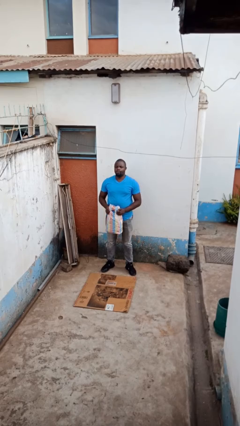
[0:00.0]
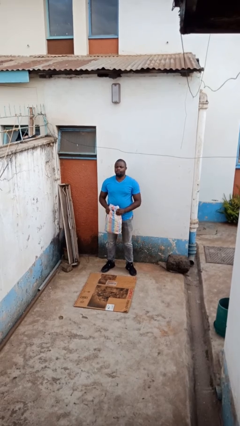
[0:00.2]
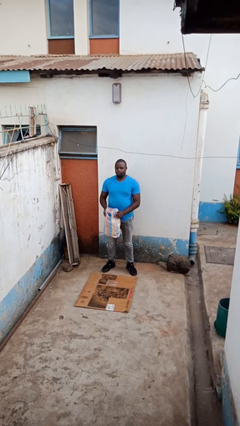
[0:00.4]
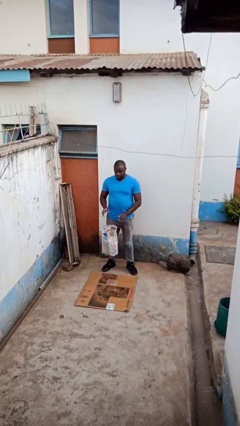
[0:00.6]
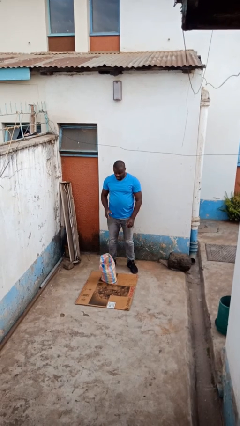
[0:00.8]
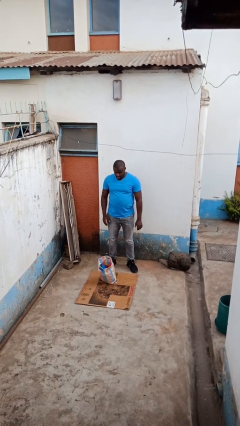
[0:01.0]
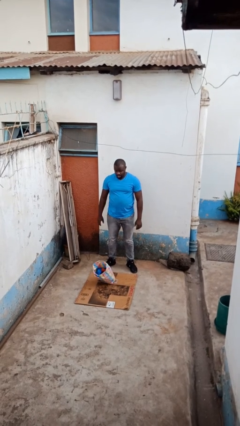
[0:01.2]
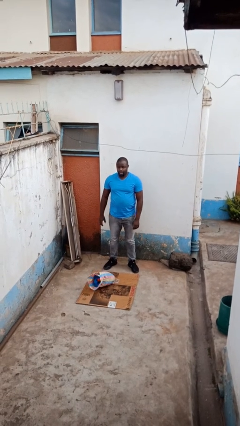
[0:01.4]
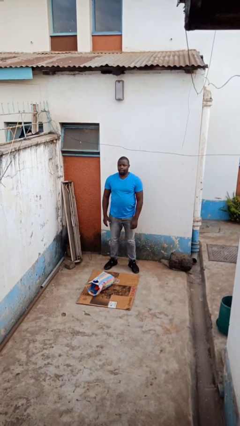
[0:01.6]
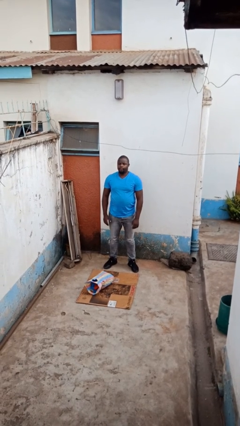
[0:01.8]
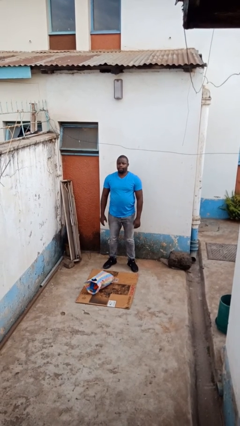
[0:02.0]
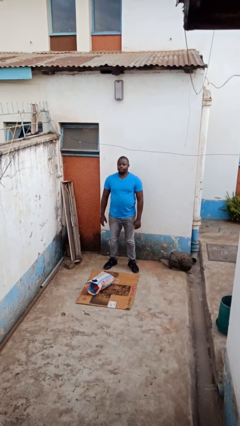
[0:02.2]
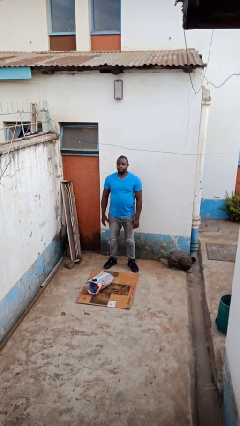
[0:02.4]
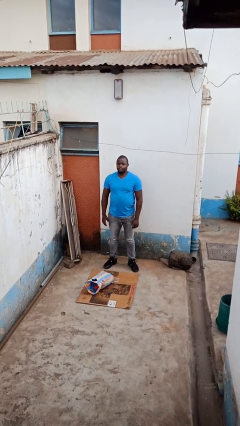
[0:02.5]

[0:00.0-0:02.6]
person drops object

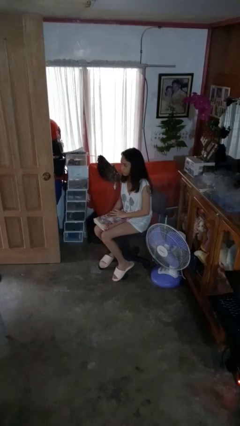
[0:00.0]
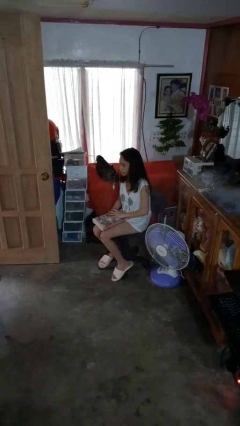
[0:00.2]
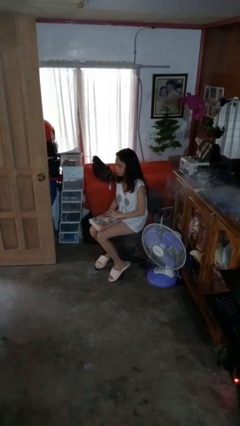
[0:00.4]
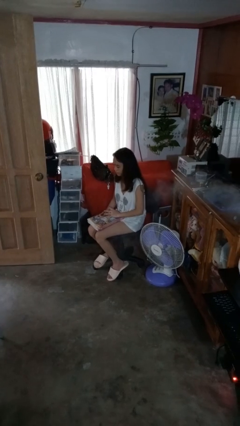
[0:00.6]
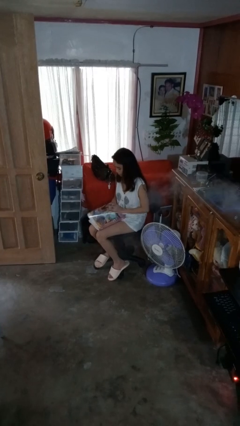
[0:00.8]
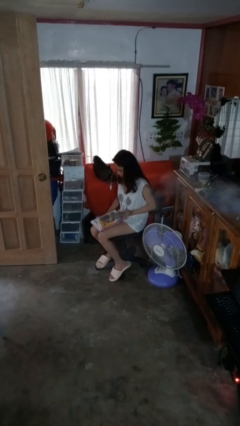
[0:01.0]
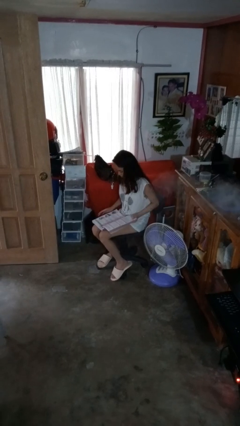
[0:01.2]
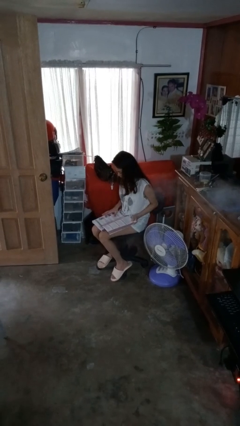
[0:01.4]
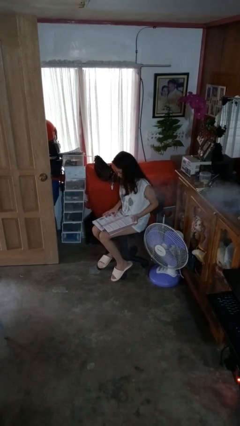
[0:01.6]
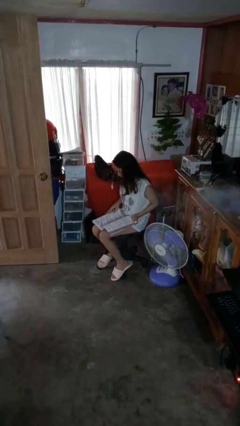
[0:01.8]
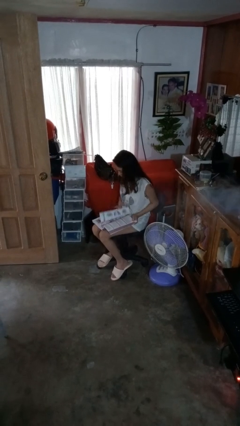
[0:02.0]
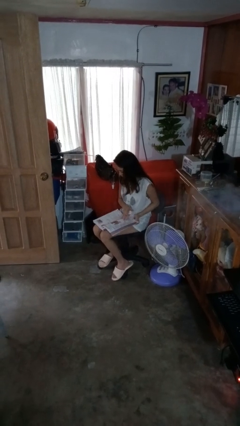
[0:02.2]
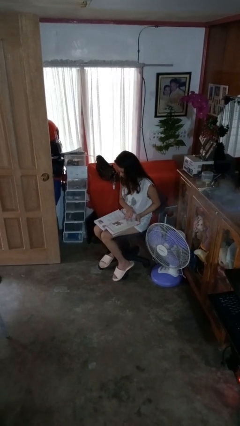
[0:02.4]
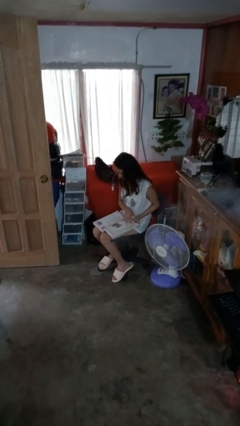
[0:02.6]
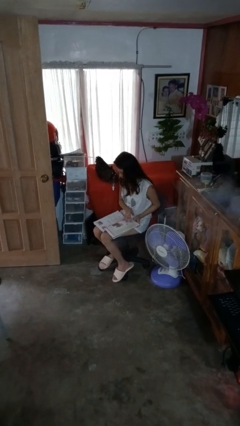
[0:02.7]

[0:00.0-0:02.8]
person reads book

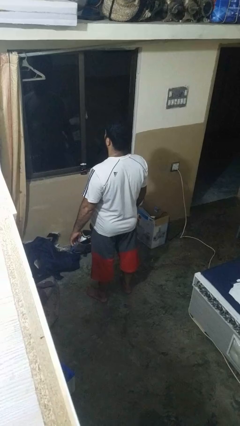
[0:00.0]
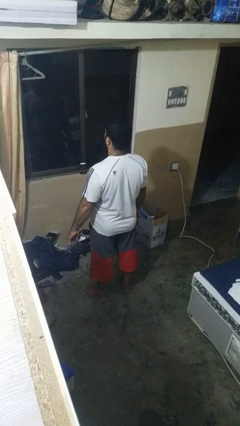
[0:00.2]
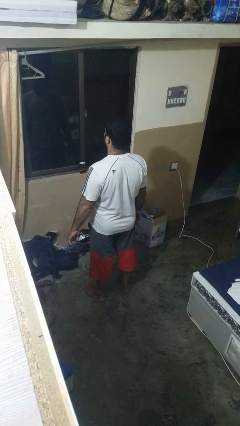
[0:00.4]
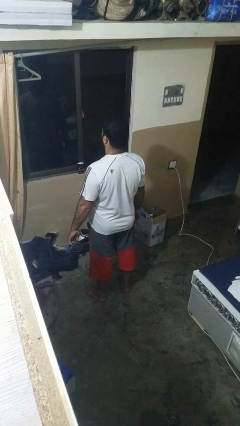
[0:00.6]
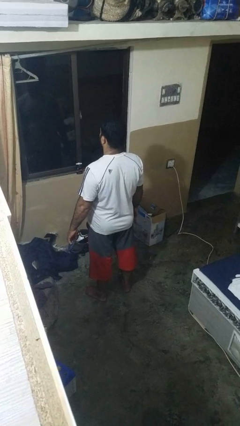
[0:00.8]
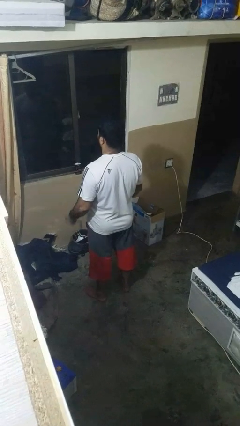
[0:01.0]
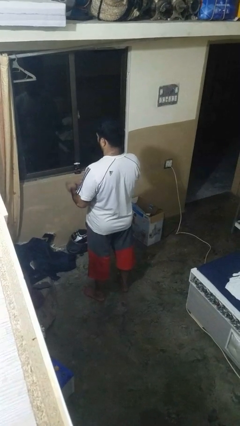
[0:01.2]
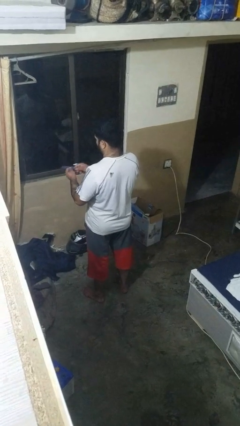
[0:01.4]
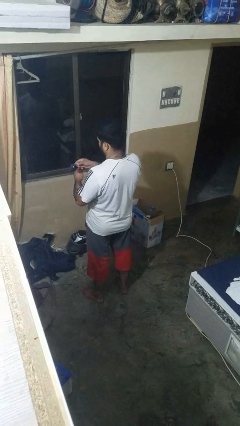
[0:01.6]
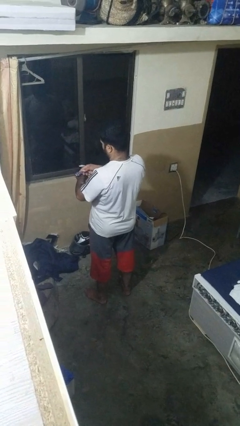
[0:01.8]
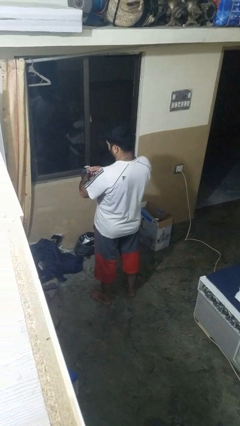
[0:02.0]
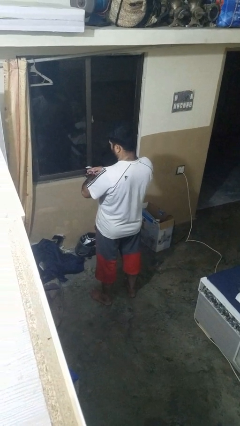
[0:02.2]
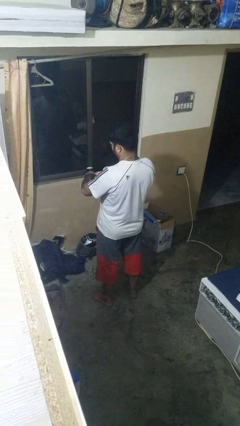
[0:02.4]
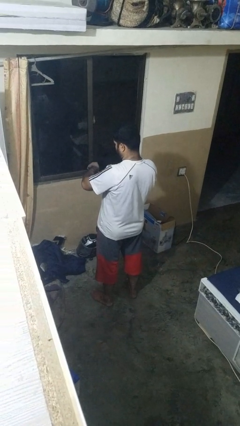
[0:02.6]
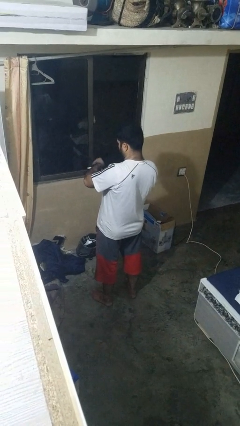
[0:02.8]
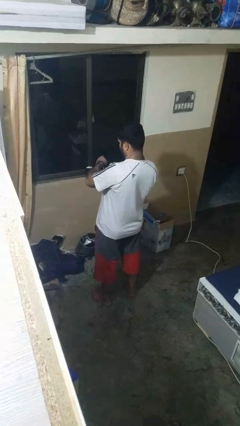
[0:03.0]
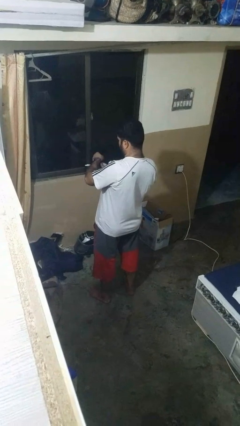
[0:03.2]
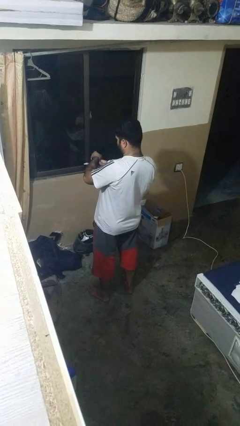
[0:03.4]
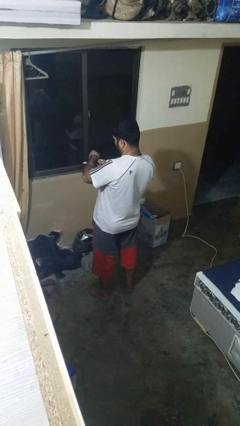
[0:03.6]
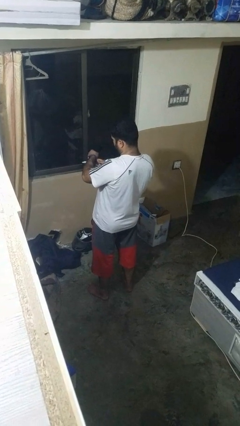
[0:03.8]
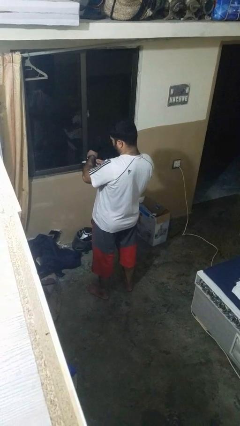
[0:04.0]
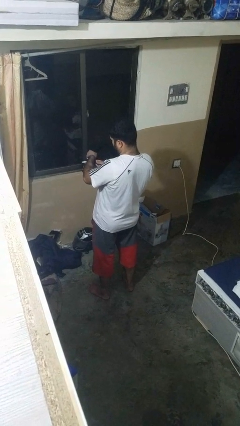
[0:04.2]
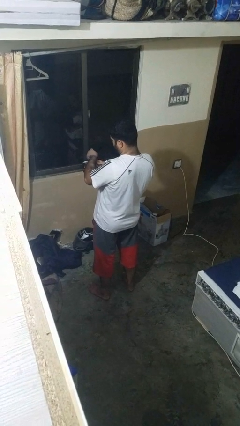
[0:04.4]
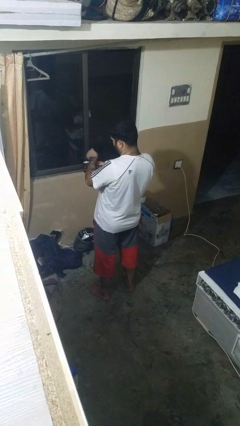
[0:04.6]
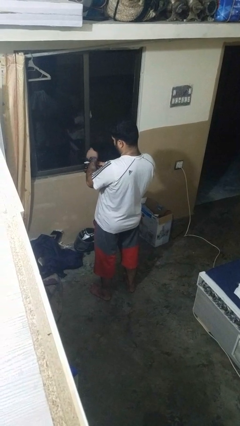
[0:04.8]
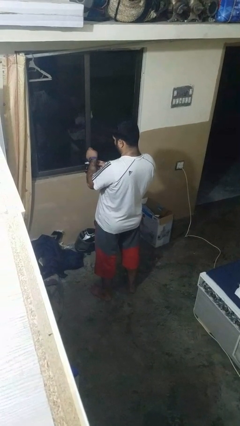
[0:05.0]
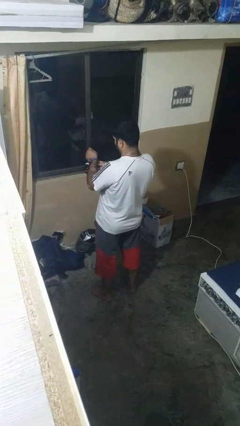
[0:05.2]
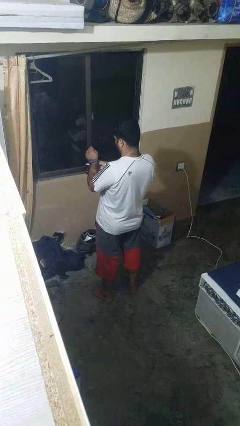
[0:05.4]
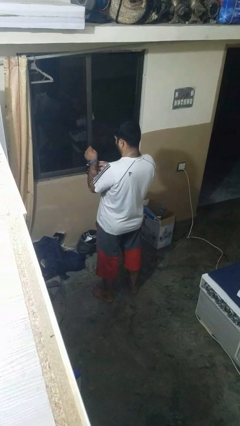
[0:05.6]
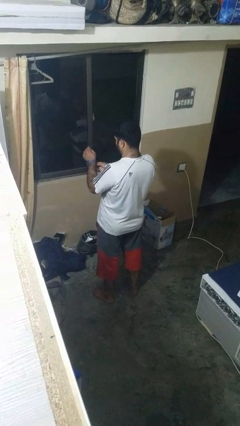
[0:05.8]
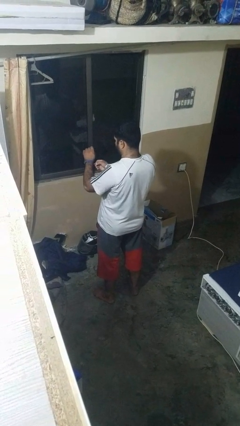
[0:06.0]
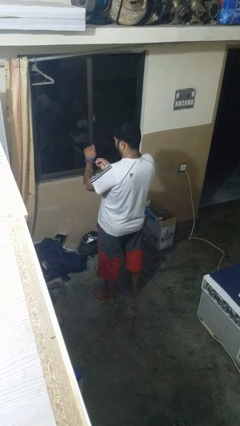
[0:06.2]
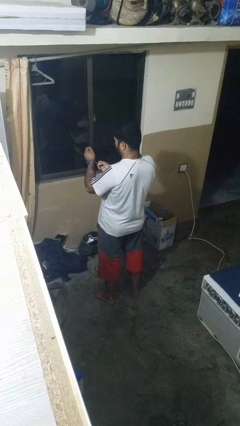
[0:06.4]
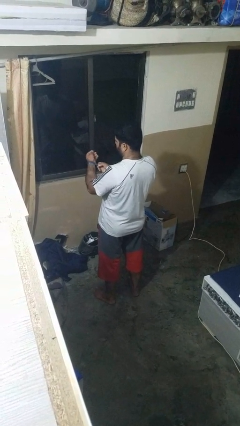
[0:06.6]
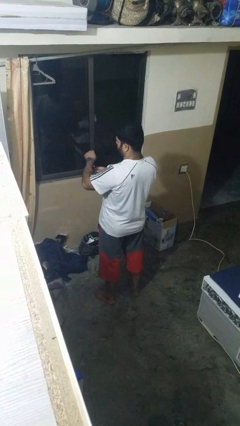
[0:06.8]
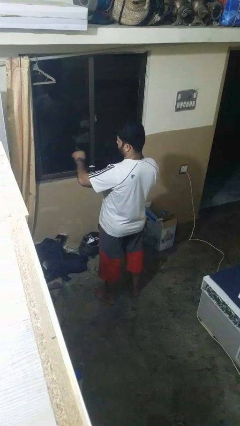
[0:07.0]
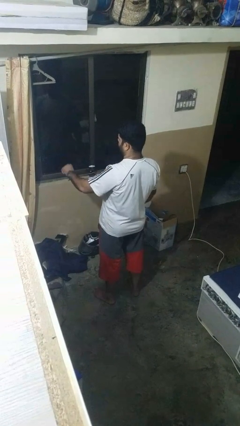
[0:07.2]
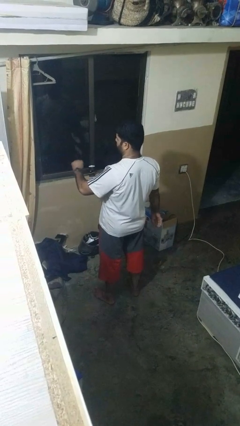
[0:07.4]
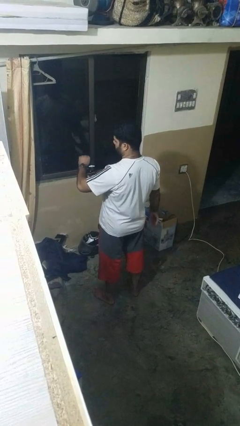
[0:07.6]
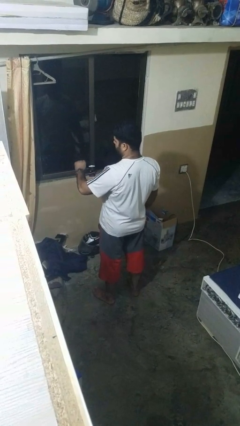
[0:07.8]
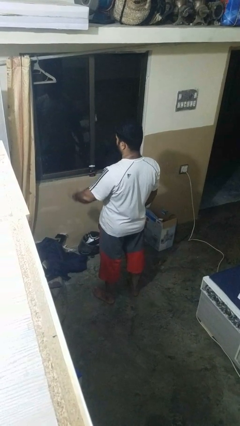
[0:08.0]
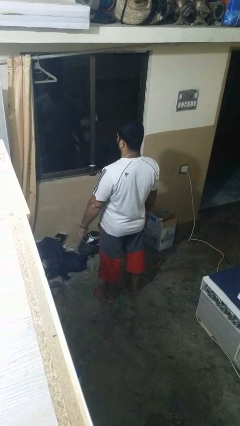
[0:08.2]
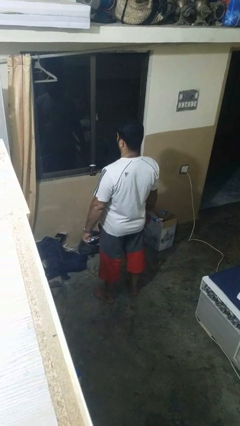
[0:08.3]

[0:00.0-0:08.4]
person puts on wristwatch

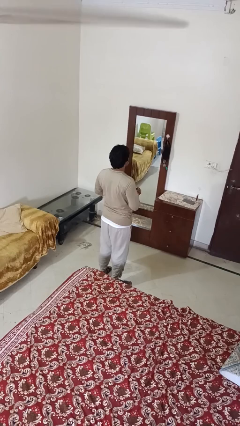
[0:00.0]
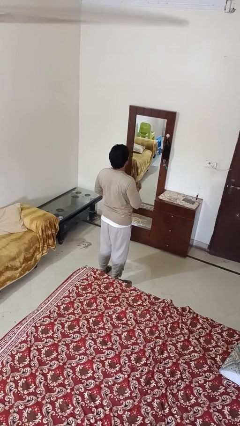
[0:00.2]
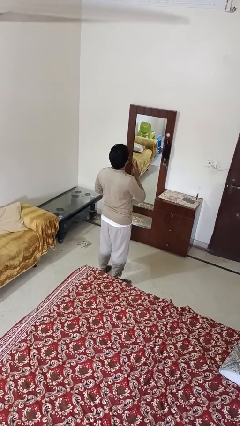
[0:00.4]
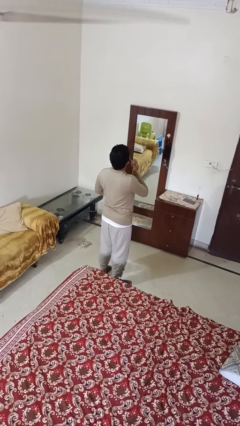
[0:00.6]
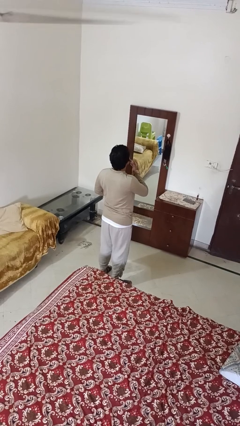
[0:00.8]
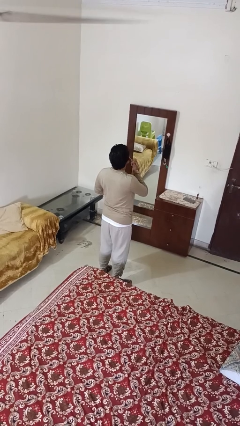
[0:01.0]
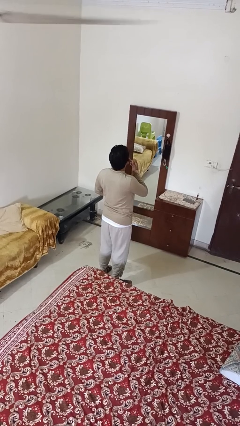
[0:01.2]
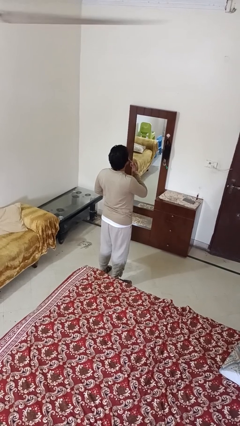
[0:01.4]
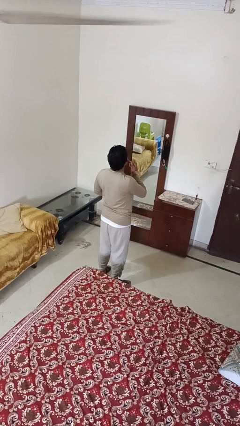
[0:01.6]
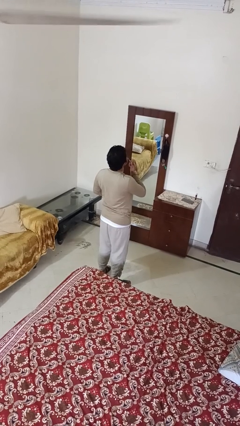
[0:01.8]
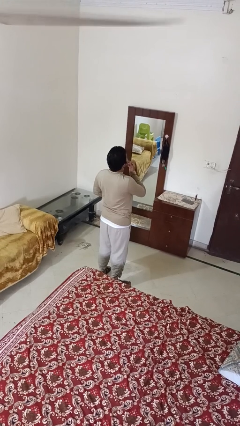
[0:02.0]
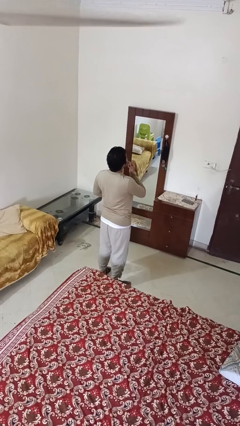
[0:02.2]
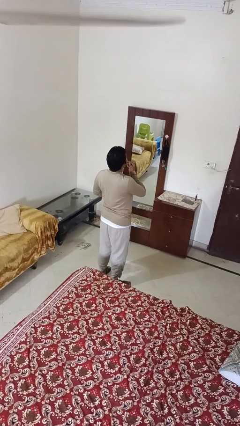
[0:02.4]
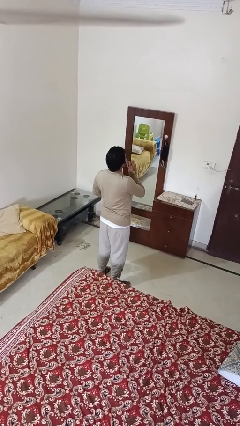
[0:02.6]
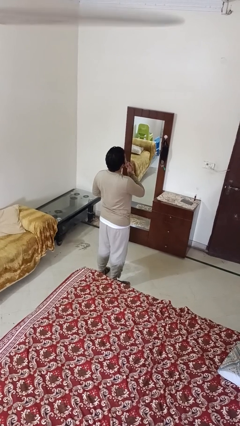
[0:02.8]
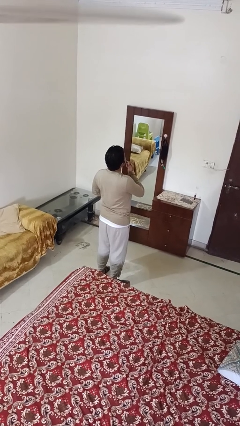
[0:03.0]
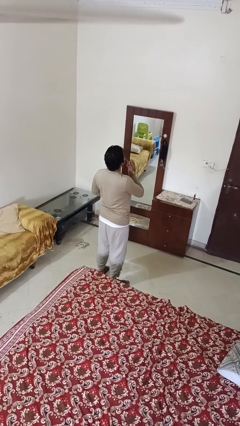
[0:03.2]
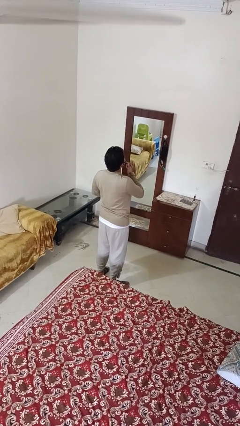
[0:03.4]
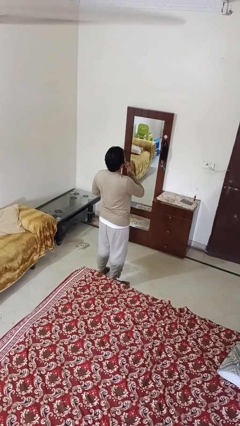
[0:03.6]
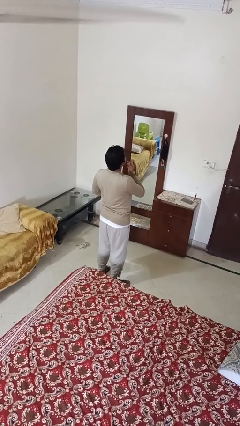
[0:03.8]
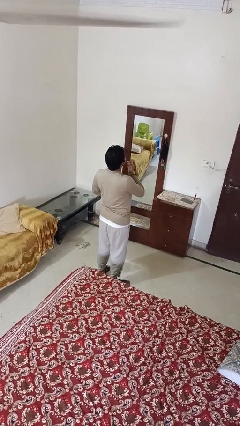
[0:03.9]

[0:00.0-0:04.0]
person applies lip makeup
